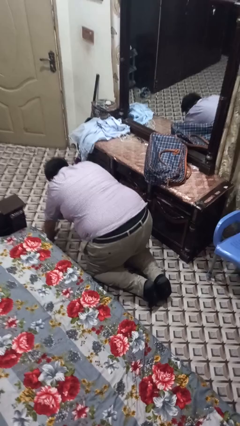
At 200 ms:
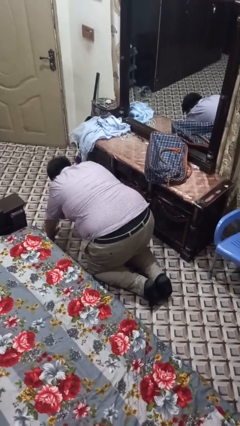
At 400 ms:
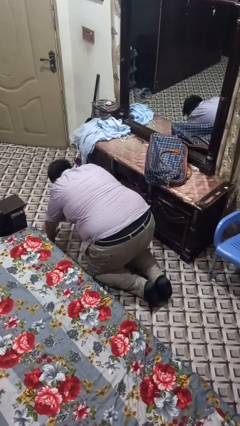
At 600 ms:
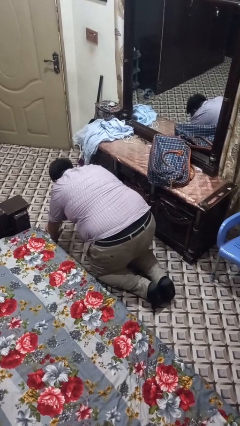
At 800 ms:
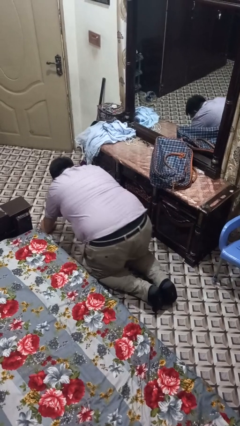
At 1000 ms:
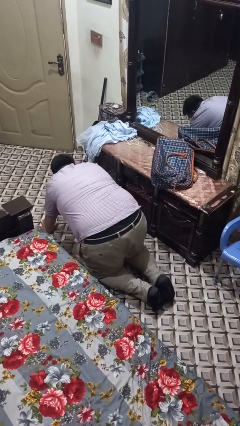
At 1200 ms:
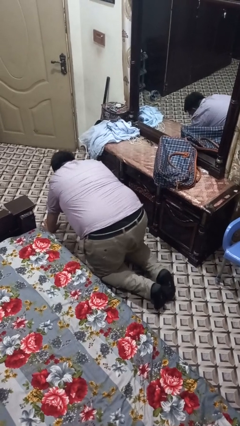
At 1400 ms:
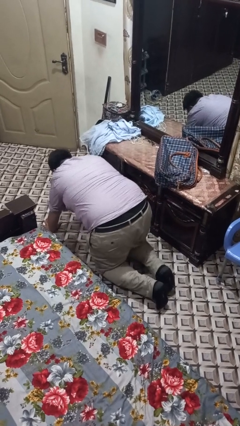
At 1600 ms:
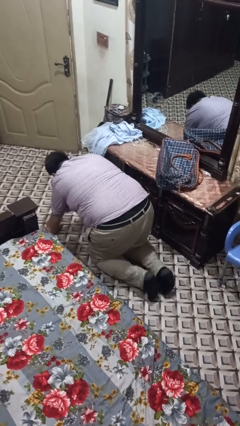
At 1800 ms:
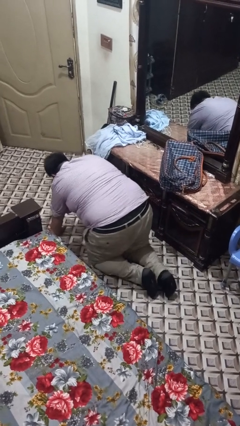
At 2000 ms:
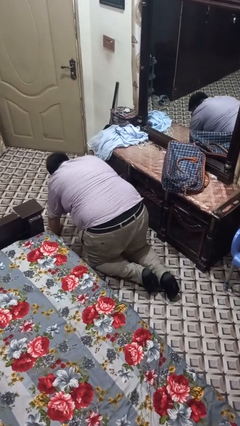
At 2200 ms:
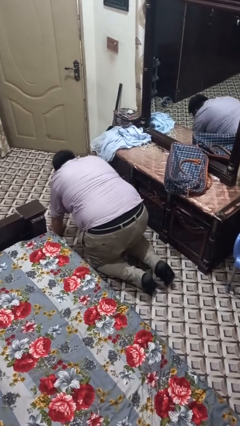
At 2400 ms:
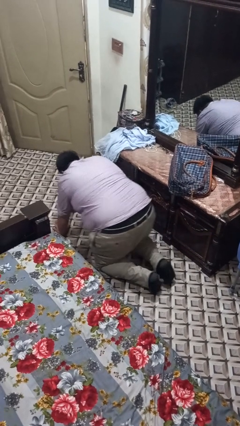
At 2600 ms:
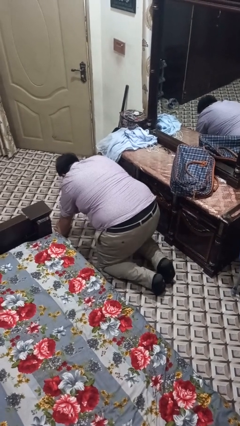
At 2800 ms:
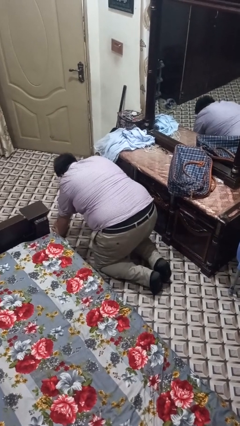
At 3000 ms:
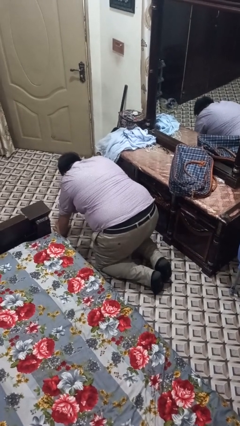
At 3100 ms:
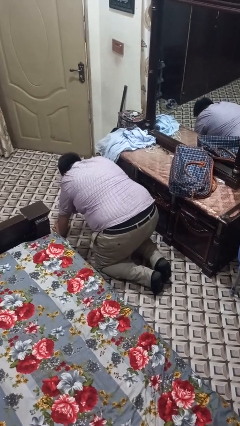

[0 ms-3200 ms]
person crawls

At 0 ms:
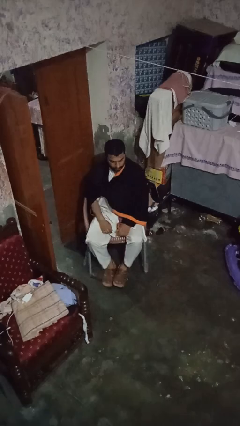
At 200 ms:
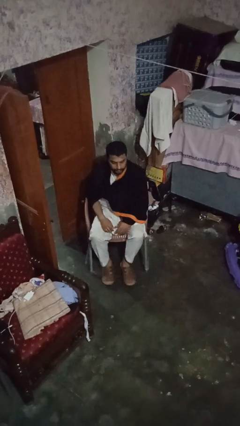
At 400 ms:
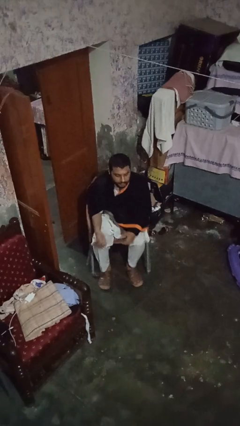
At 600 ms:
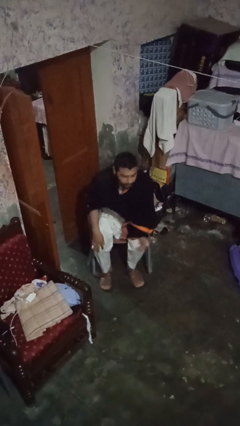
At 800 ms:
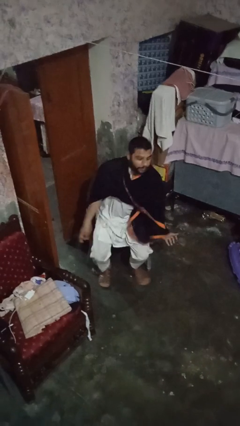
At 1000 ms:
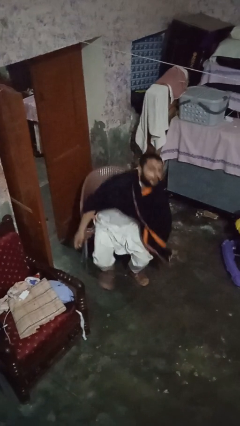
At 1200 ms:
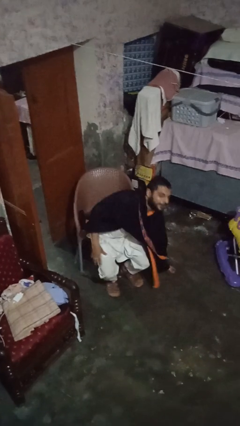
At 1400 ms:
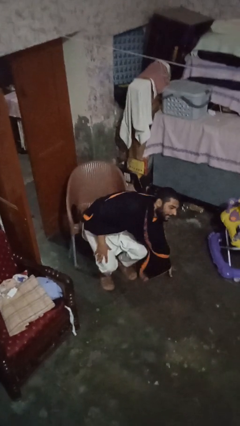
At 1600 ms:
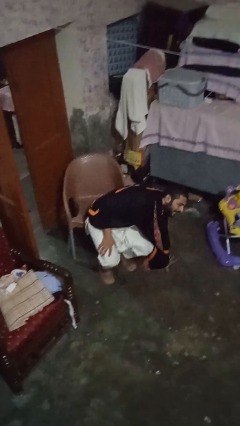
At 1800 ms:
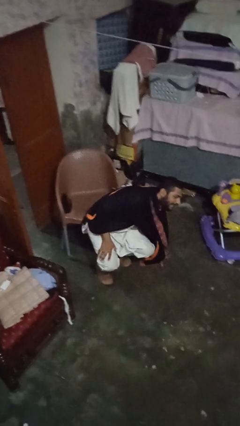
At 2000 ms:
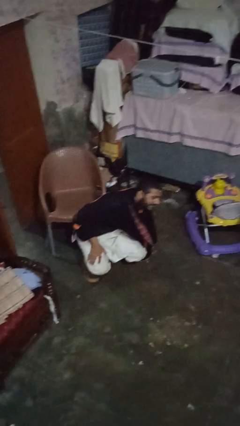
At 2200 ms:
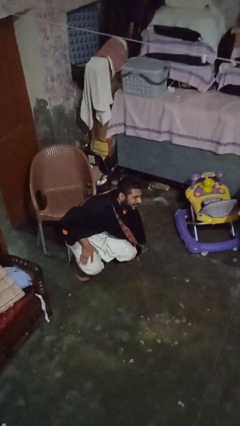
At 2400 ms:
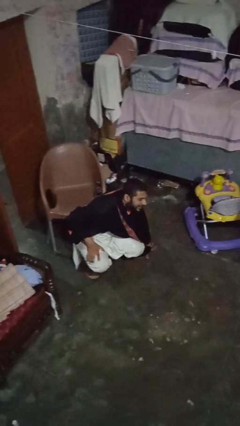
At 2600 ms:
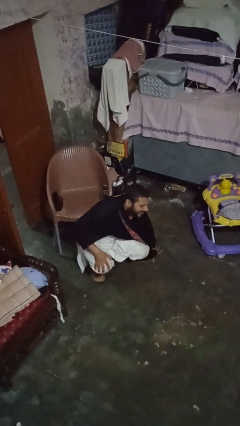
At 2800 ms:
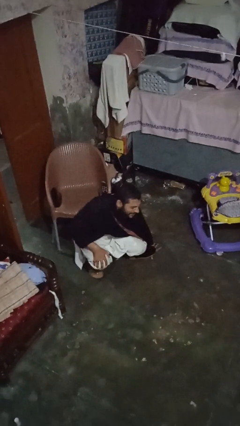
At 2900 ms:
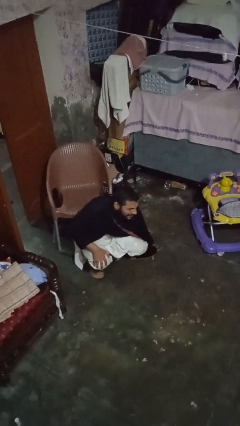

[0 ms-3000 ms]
person falls from chair

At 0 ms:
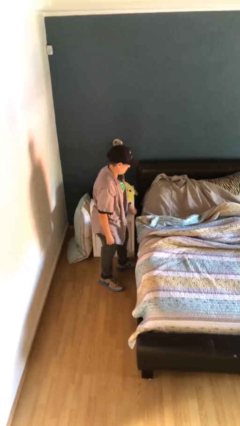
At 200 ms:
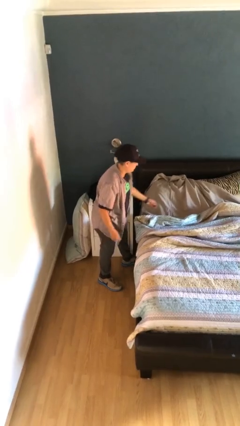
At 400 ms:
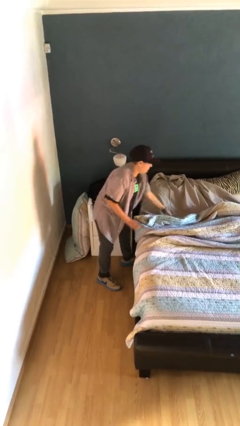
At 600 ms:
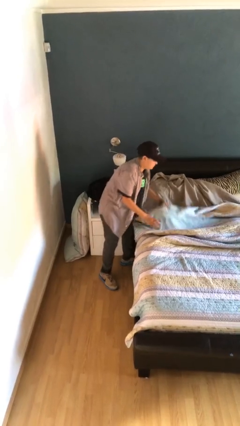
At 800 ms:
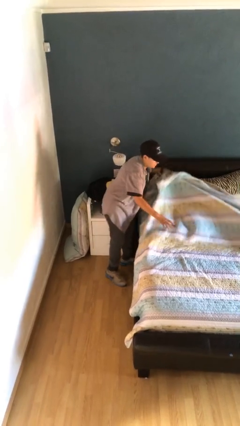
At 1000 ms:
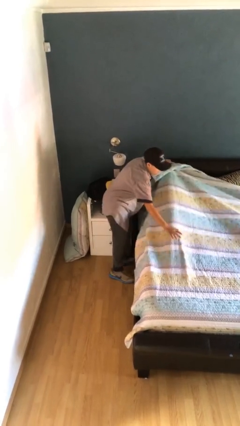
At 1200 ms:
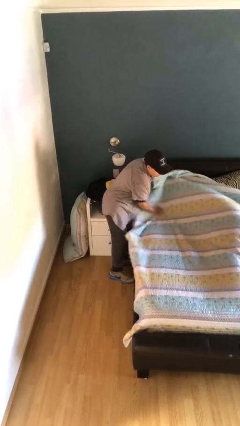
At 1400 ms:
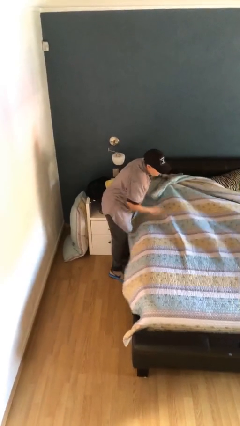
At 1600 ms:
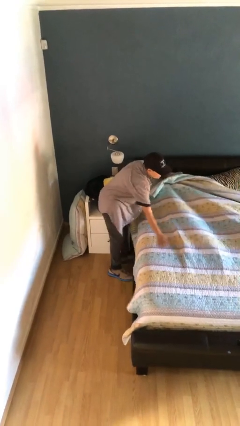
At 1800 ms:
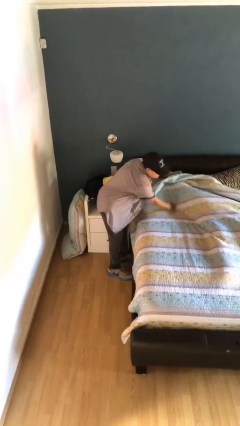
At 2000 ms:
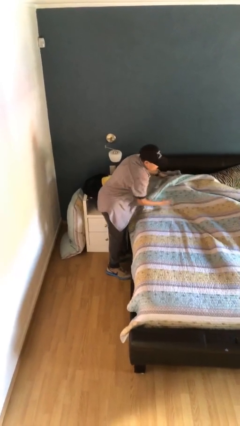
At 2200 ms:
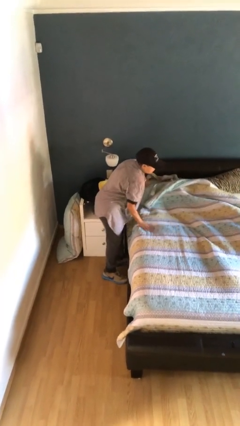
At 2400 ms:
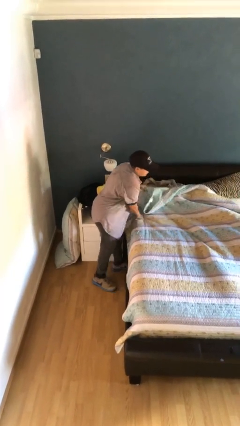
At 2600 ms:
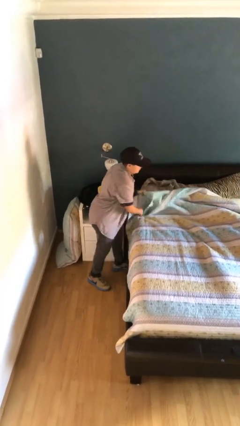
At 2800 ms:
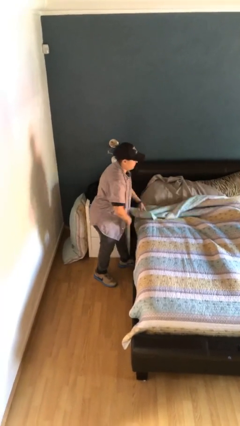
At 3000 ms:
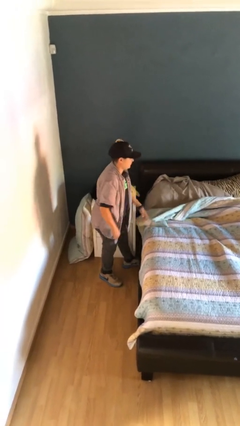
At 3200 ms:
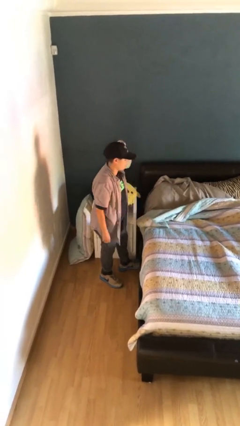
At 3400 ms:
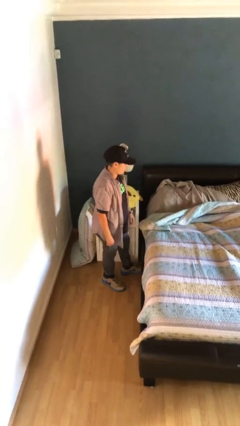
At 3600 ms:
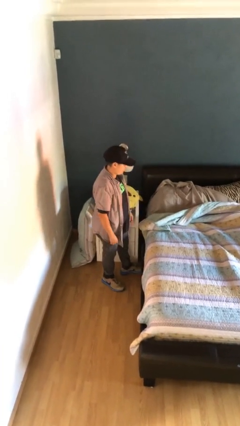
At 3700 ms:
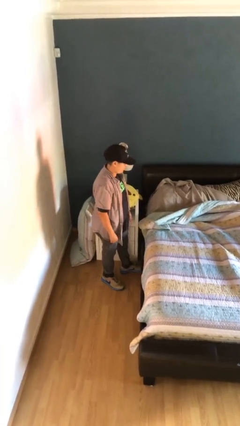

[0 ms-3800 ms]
person makes bed

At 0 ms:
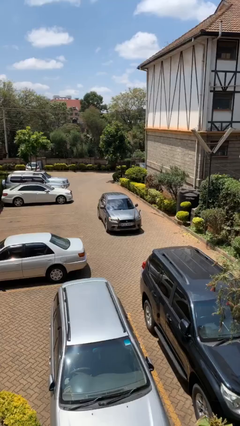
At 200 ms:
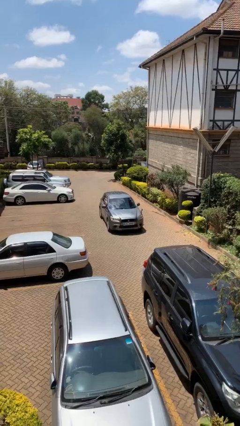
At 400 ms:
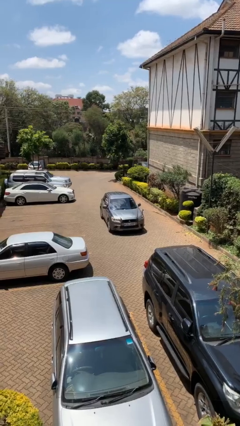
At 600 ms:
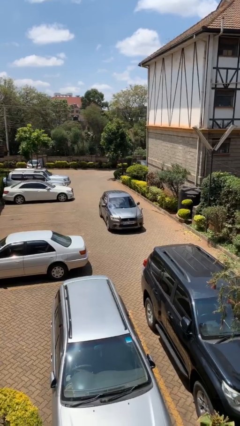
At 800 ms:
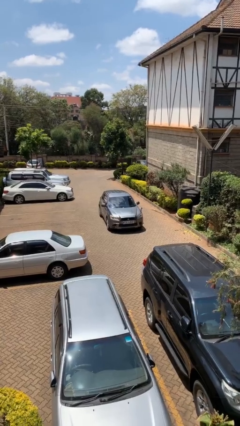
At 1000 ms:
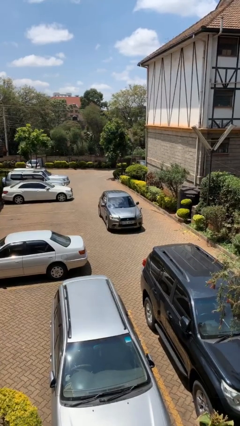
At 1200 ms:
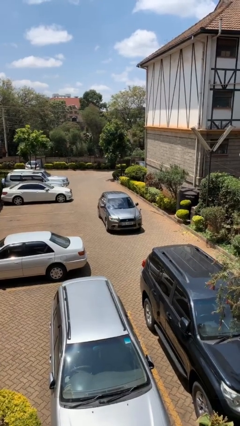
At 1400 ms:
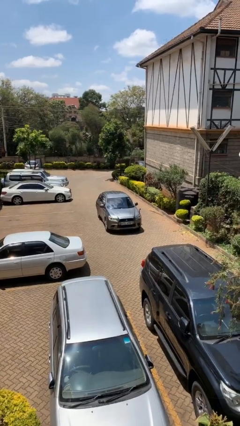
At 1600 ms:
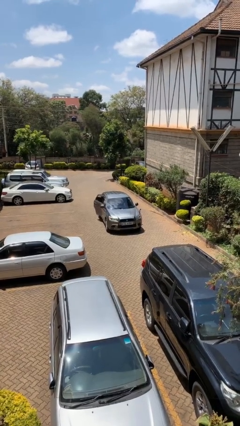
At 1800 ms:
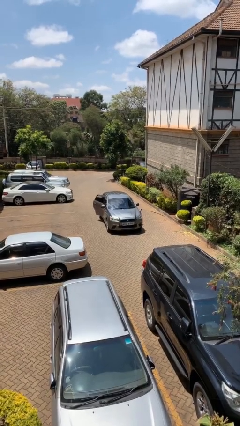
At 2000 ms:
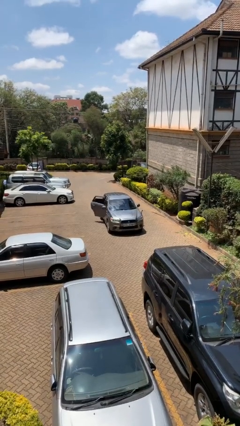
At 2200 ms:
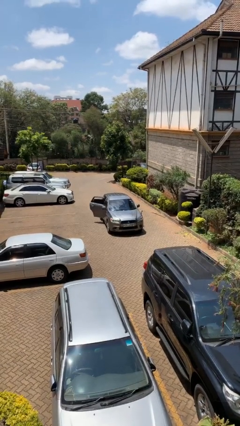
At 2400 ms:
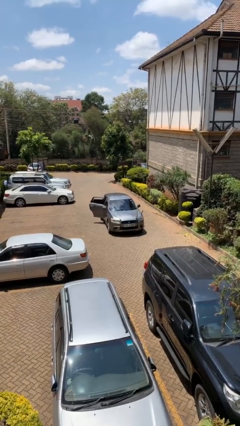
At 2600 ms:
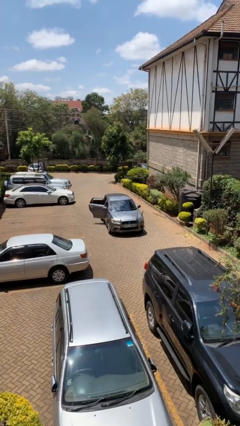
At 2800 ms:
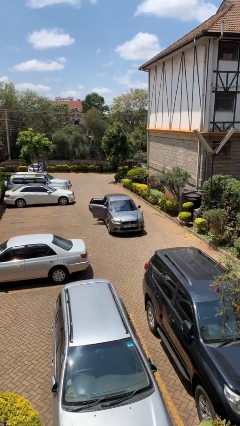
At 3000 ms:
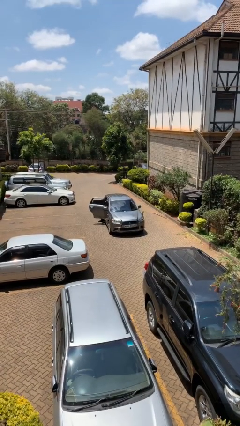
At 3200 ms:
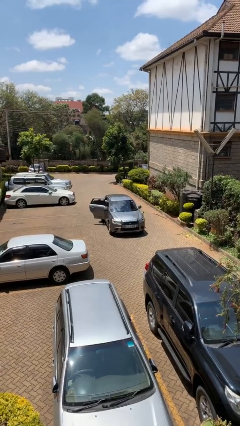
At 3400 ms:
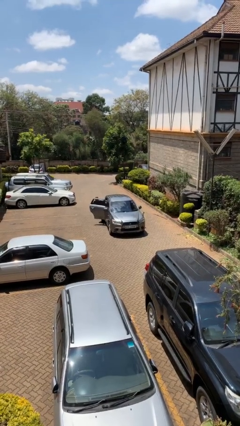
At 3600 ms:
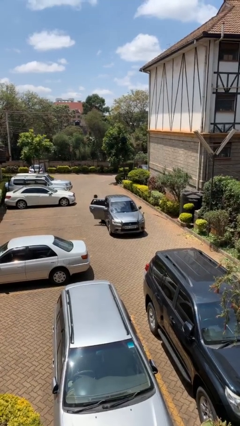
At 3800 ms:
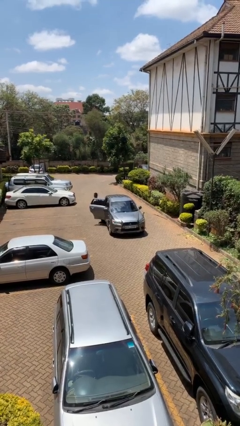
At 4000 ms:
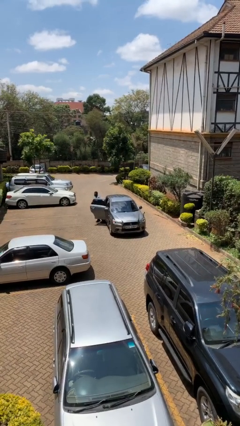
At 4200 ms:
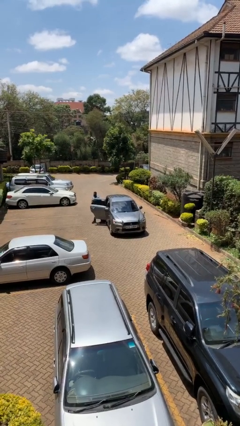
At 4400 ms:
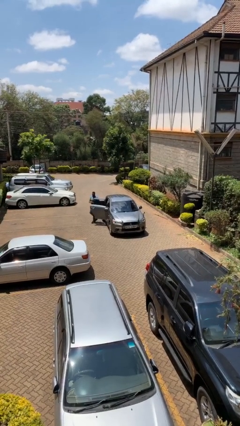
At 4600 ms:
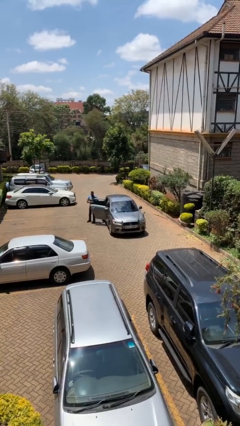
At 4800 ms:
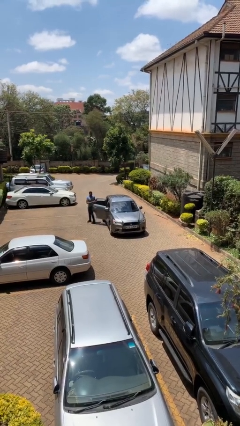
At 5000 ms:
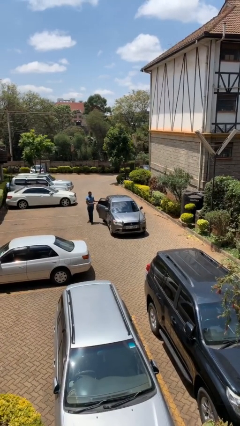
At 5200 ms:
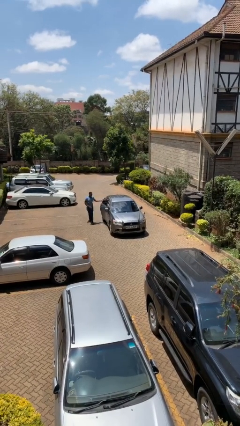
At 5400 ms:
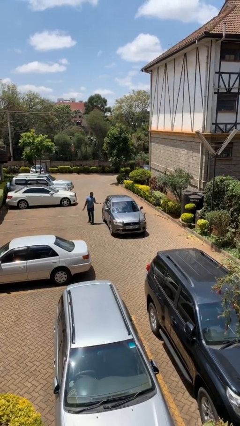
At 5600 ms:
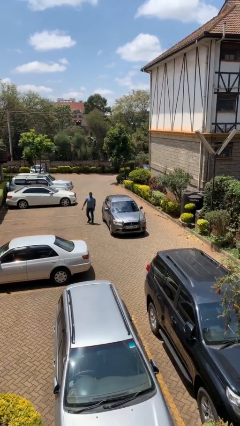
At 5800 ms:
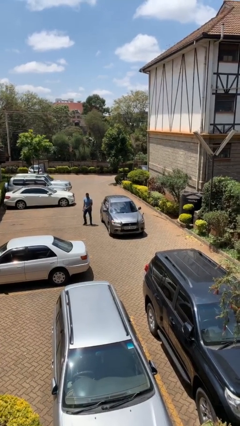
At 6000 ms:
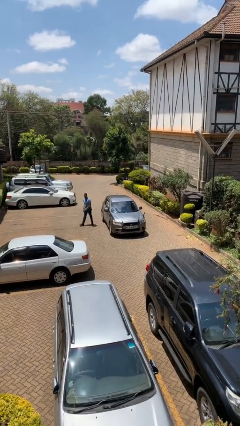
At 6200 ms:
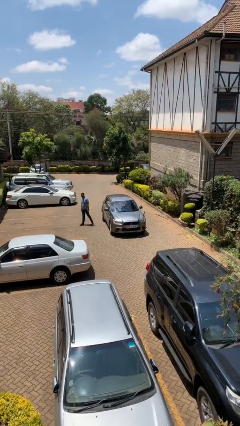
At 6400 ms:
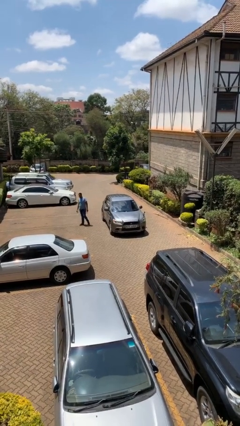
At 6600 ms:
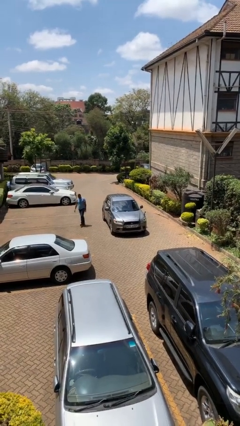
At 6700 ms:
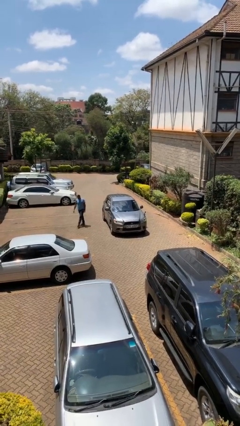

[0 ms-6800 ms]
car drops off person

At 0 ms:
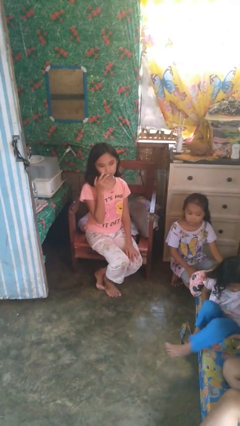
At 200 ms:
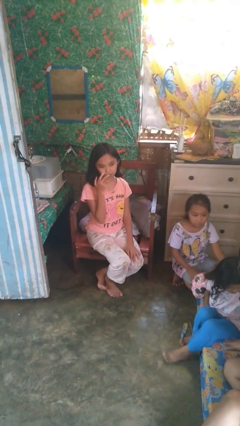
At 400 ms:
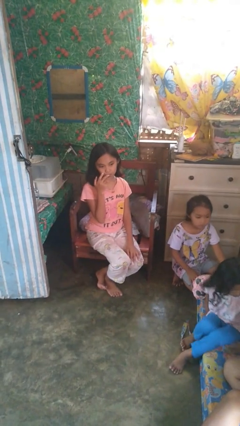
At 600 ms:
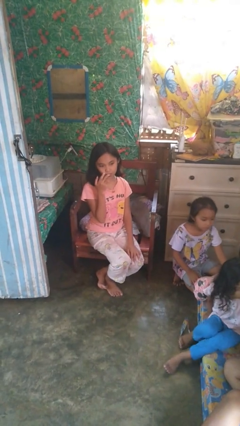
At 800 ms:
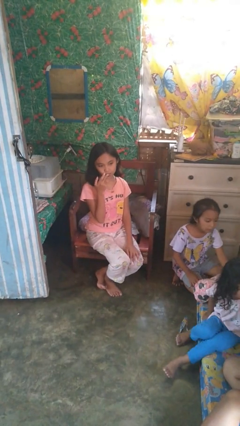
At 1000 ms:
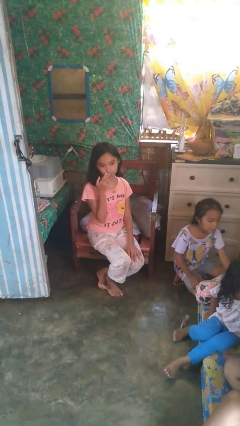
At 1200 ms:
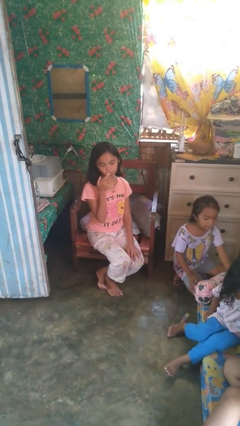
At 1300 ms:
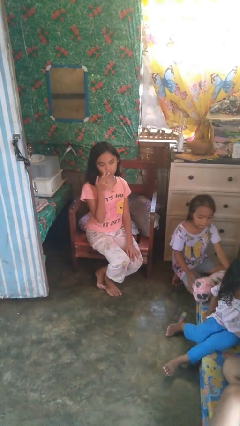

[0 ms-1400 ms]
person licks fingers
